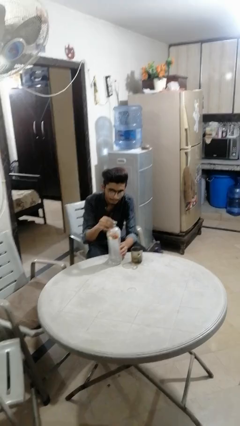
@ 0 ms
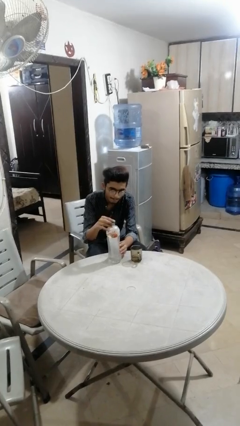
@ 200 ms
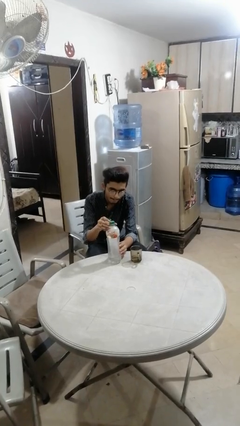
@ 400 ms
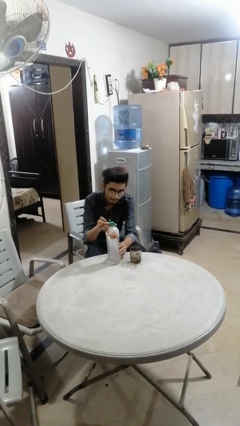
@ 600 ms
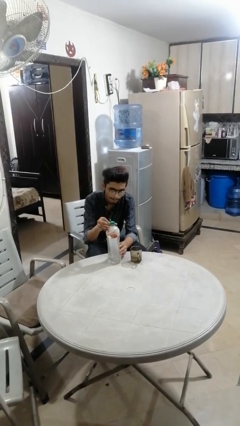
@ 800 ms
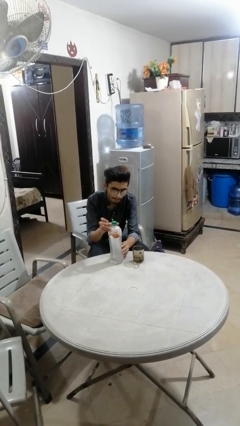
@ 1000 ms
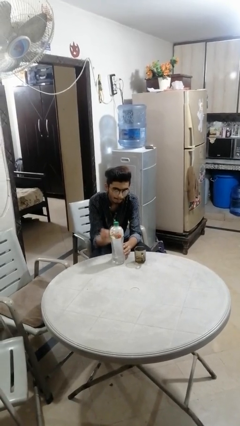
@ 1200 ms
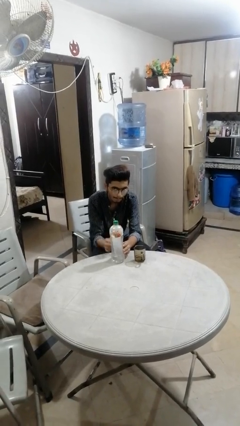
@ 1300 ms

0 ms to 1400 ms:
person screws lid to bottle

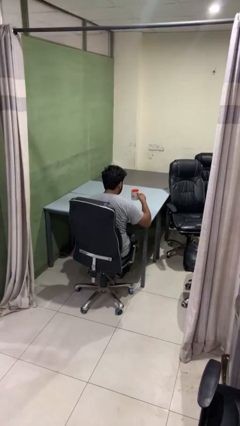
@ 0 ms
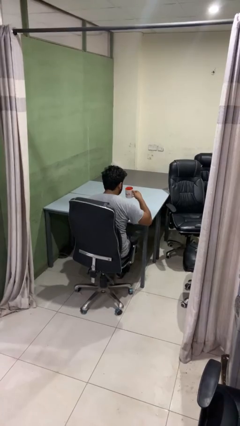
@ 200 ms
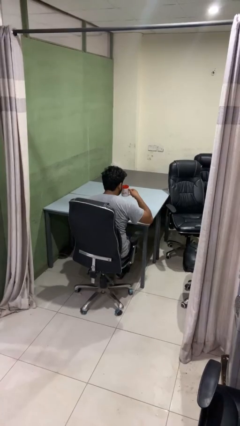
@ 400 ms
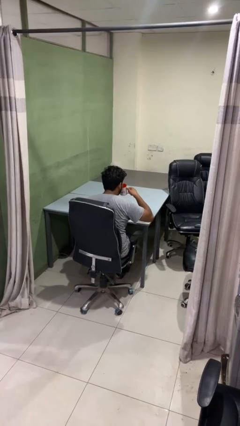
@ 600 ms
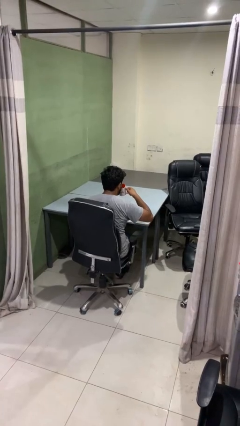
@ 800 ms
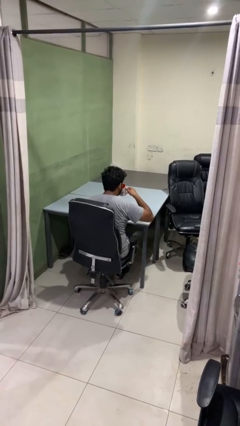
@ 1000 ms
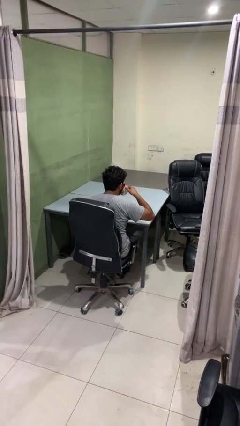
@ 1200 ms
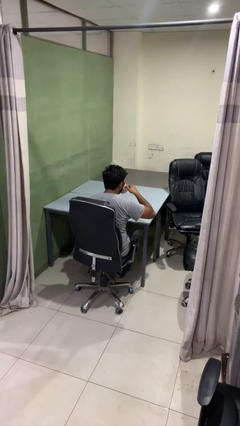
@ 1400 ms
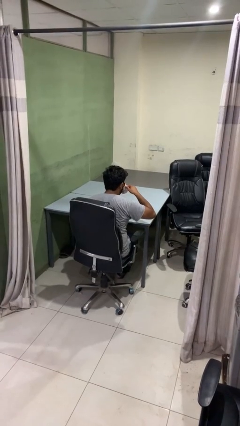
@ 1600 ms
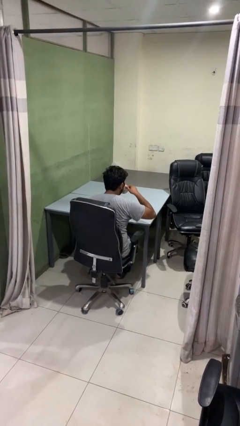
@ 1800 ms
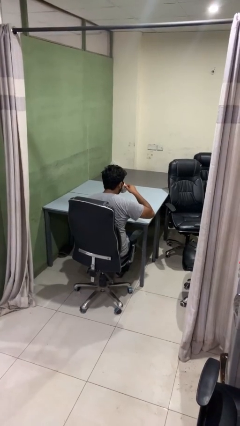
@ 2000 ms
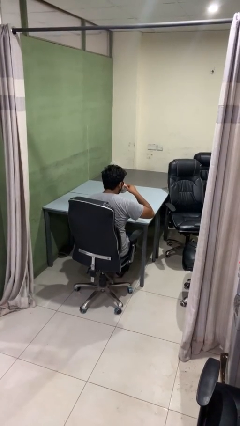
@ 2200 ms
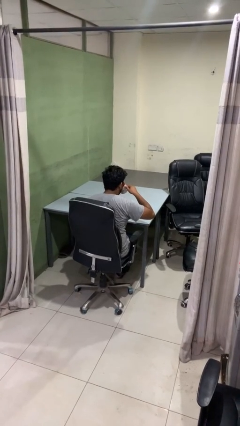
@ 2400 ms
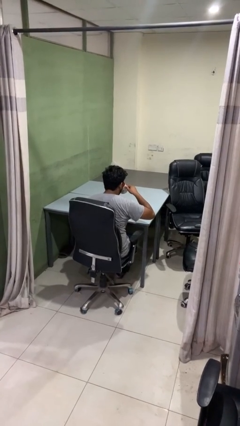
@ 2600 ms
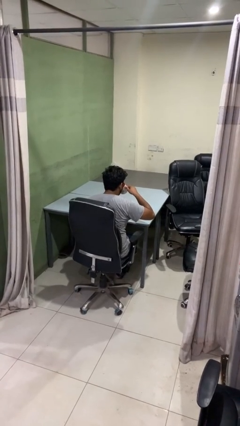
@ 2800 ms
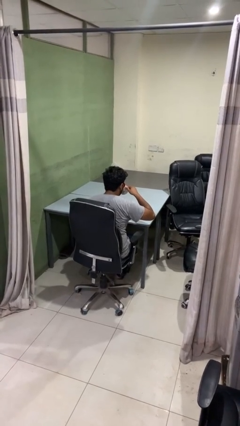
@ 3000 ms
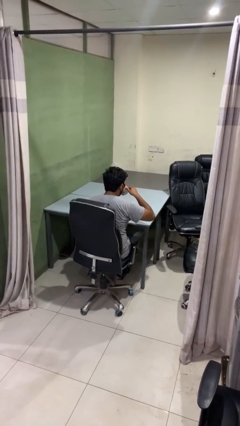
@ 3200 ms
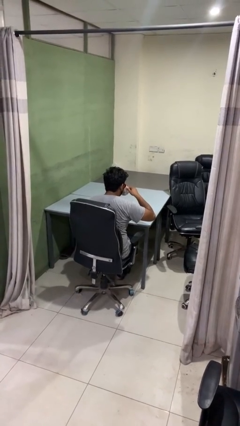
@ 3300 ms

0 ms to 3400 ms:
person drinks from mug

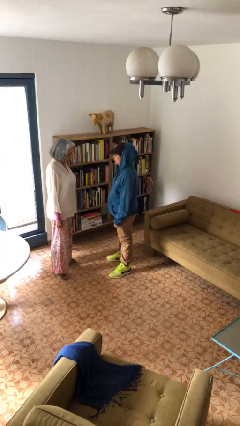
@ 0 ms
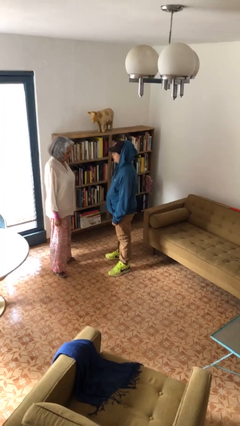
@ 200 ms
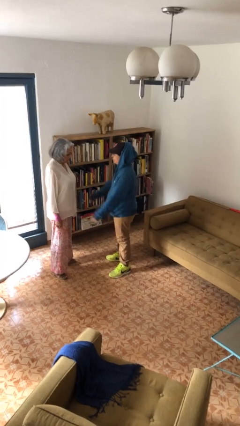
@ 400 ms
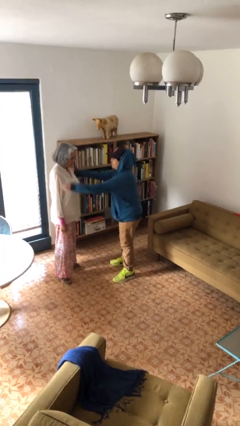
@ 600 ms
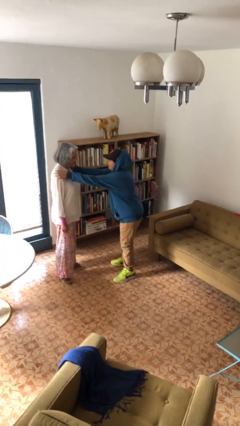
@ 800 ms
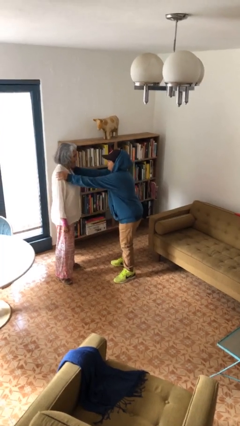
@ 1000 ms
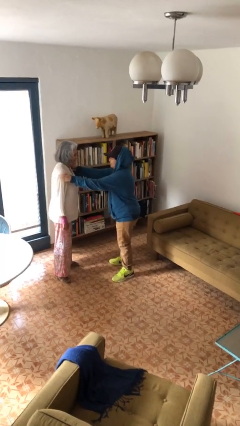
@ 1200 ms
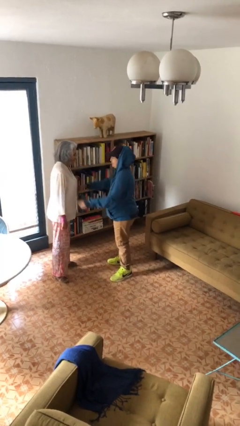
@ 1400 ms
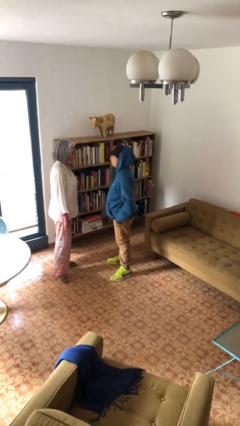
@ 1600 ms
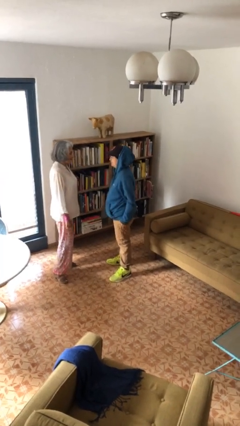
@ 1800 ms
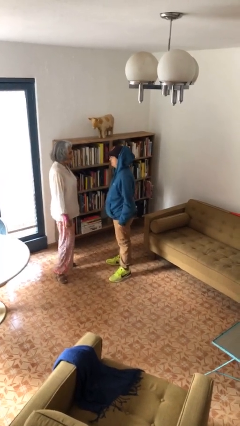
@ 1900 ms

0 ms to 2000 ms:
person pounds shoulders of person

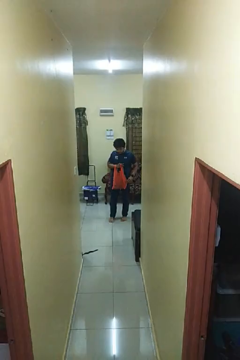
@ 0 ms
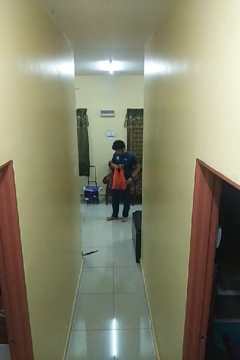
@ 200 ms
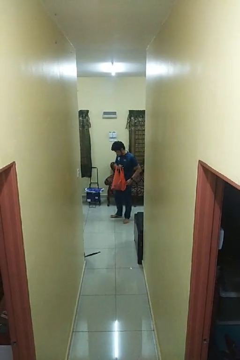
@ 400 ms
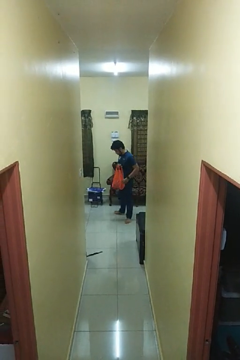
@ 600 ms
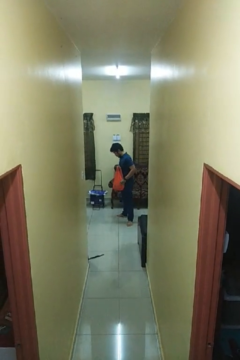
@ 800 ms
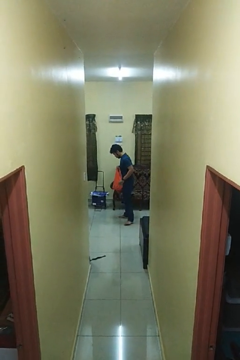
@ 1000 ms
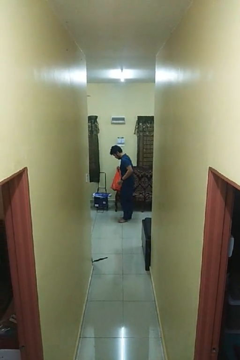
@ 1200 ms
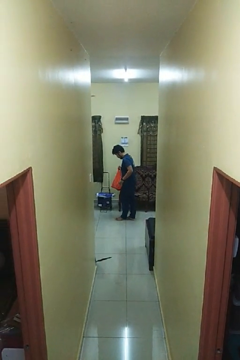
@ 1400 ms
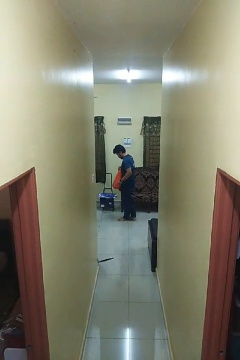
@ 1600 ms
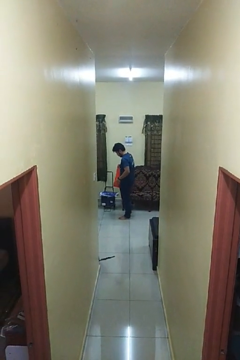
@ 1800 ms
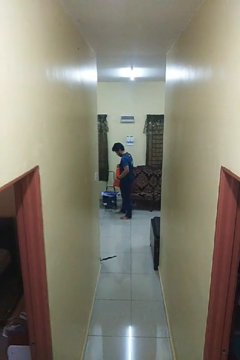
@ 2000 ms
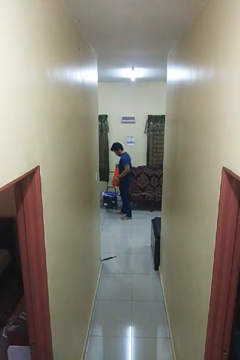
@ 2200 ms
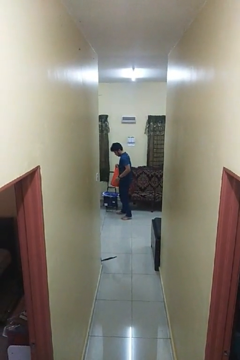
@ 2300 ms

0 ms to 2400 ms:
person carries groceries

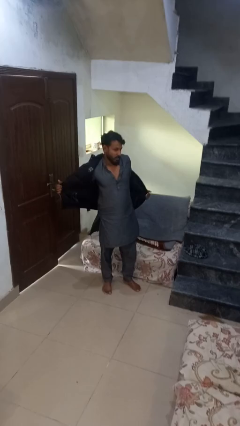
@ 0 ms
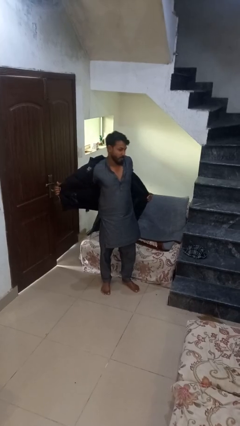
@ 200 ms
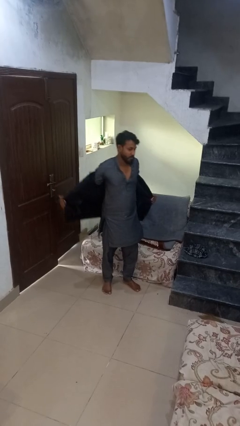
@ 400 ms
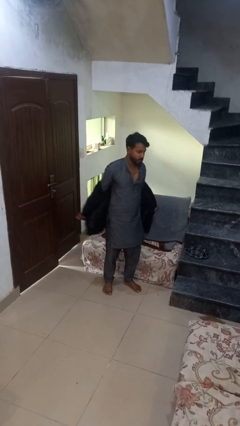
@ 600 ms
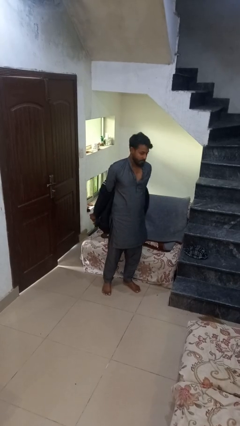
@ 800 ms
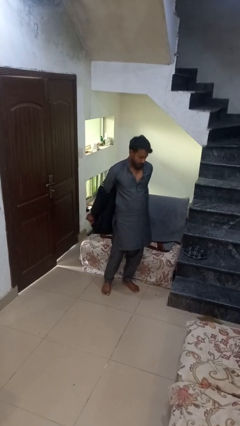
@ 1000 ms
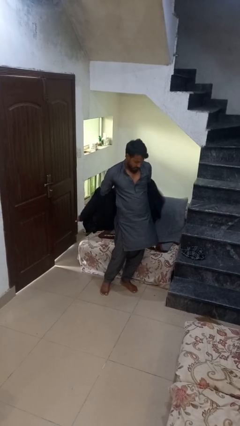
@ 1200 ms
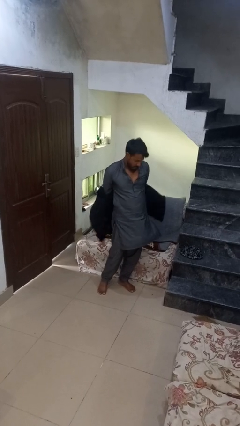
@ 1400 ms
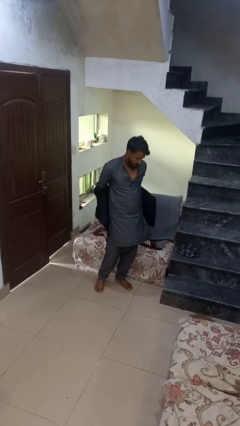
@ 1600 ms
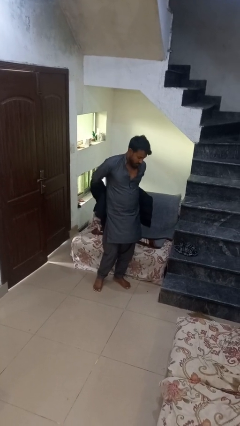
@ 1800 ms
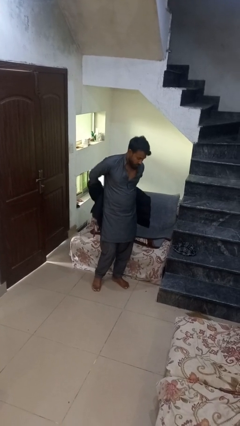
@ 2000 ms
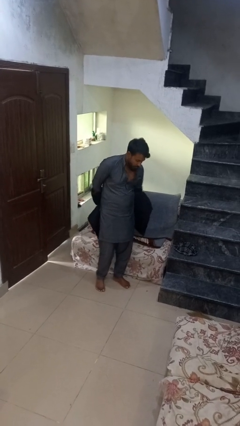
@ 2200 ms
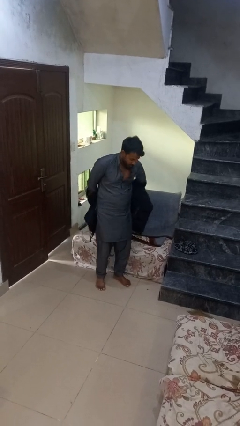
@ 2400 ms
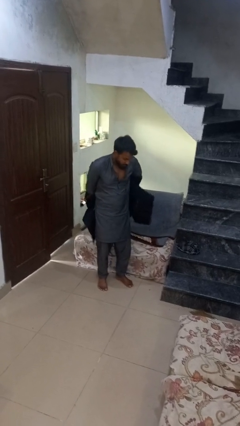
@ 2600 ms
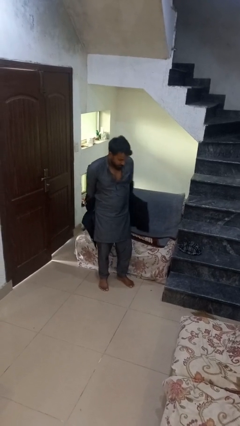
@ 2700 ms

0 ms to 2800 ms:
person takes off jacket

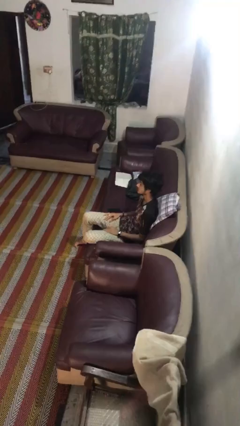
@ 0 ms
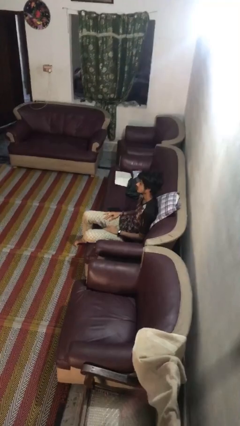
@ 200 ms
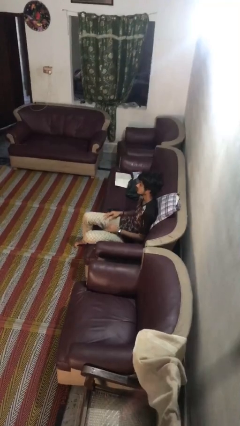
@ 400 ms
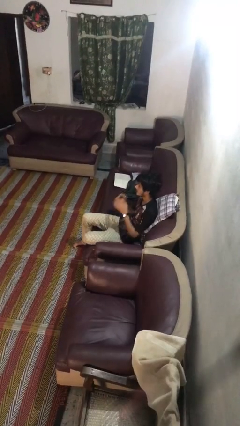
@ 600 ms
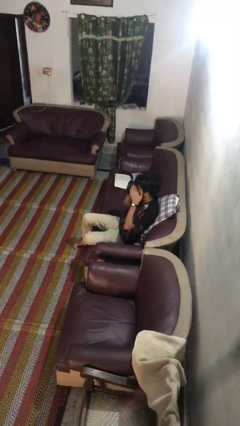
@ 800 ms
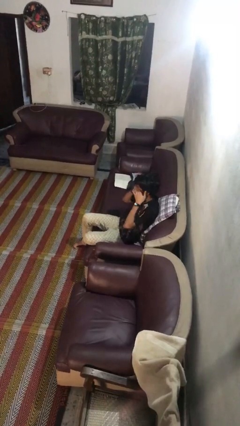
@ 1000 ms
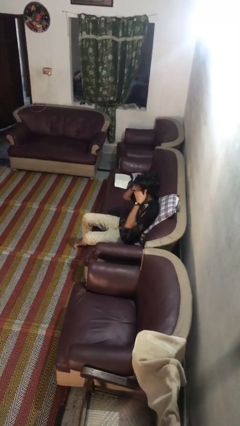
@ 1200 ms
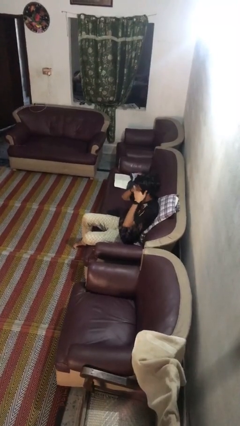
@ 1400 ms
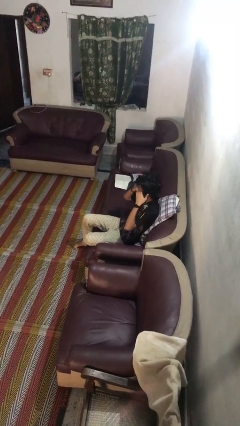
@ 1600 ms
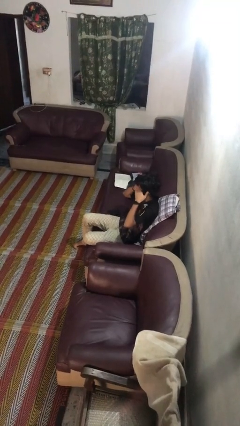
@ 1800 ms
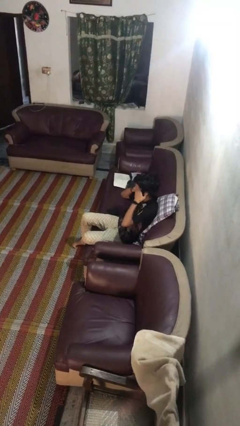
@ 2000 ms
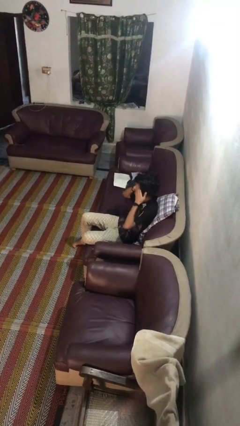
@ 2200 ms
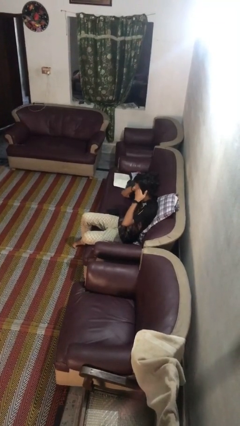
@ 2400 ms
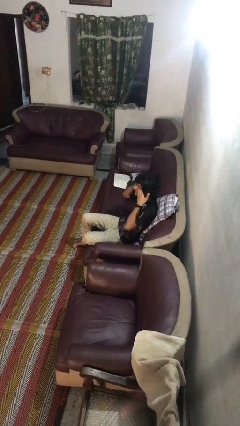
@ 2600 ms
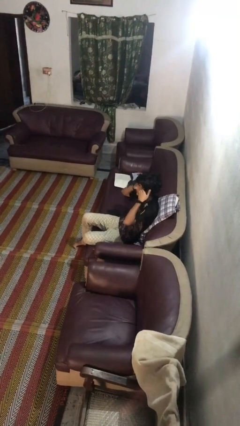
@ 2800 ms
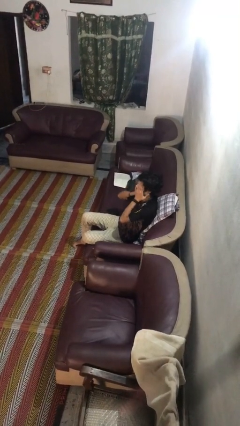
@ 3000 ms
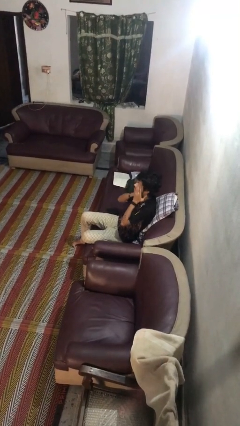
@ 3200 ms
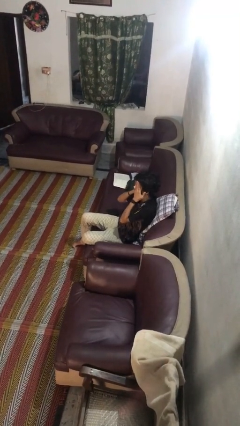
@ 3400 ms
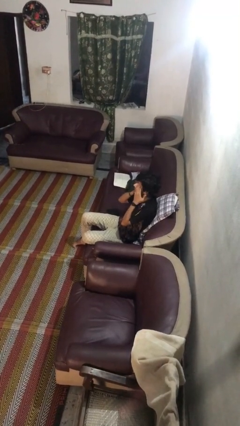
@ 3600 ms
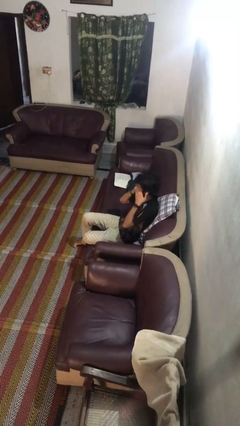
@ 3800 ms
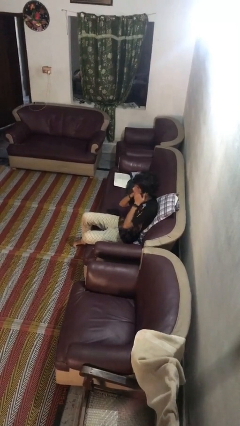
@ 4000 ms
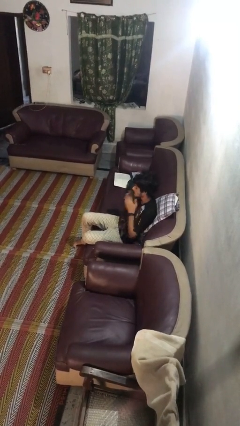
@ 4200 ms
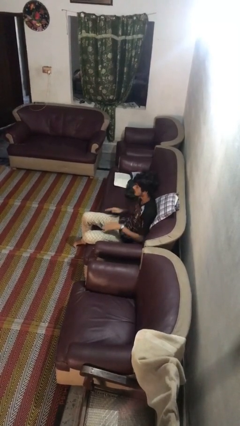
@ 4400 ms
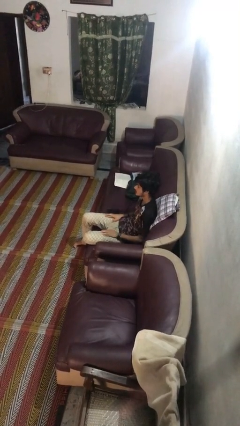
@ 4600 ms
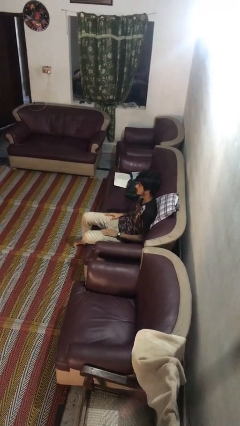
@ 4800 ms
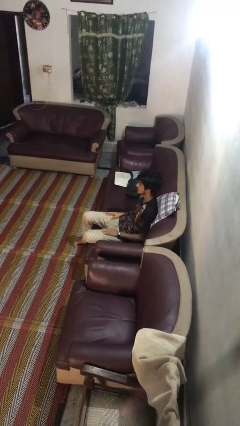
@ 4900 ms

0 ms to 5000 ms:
person rubs eyes

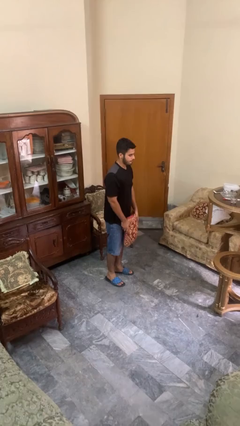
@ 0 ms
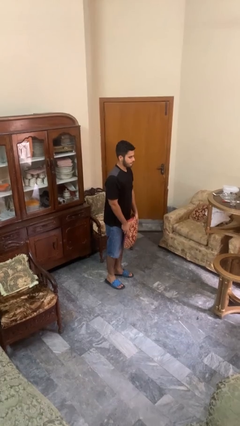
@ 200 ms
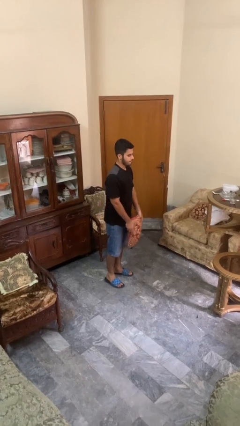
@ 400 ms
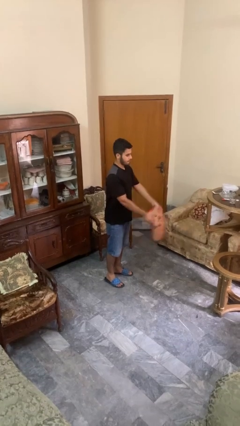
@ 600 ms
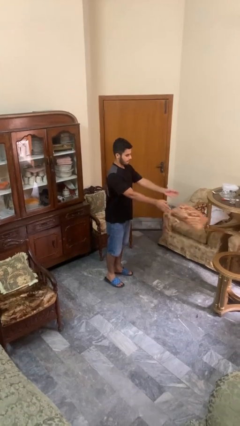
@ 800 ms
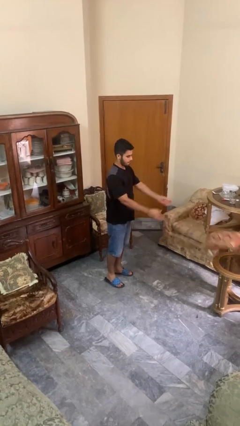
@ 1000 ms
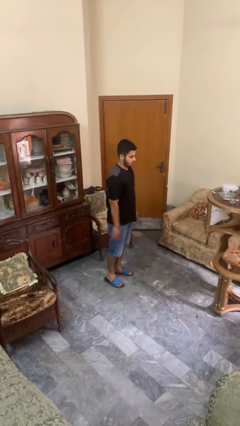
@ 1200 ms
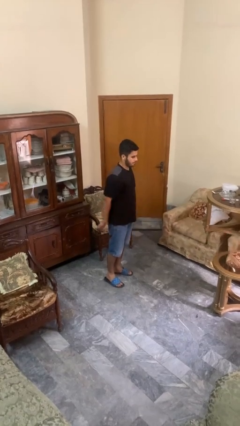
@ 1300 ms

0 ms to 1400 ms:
person throws object on table
